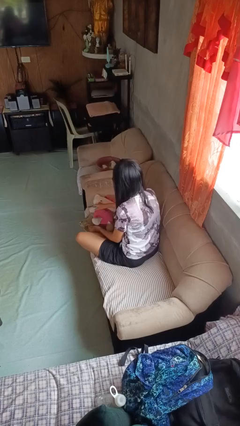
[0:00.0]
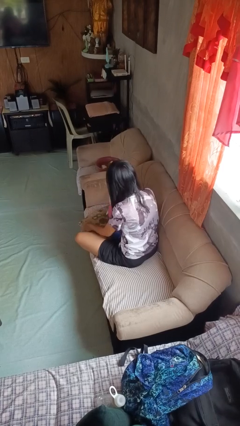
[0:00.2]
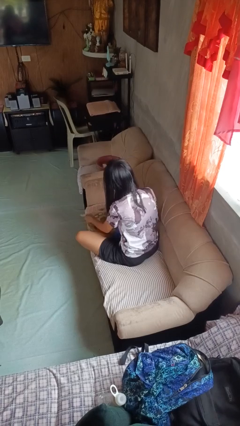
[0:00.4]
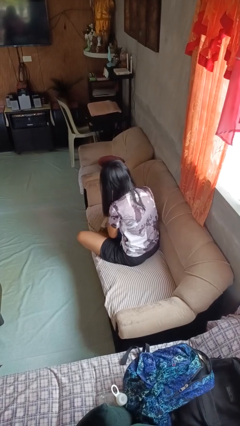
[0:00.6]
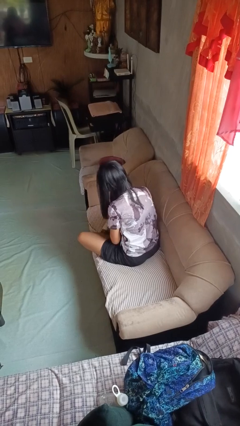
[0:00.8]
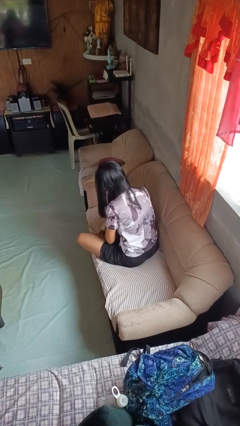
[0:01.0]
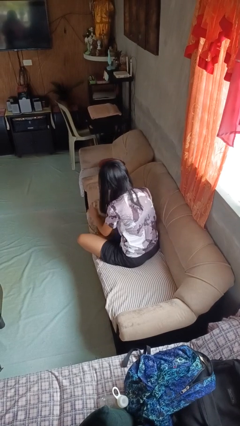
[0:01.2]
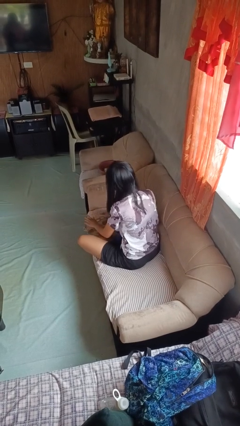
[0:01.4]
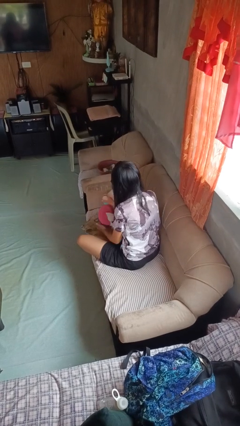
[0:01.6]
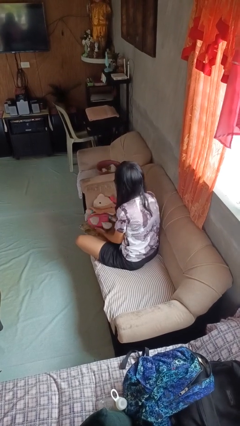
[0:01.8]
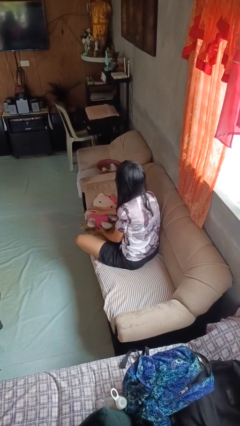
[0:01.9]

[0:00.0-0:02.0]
person searches in couch

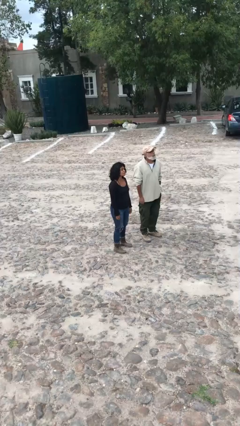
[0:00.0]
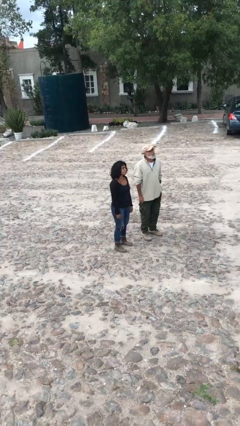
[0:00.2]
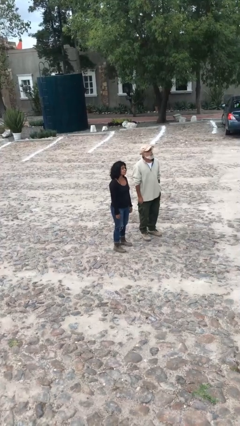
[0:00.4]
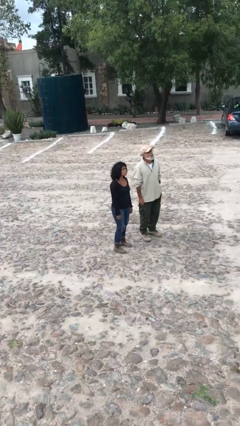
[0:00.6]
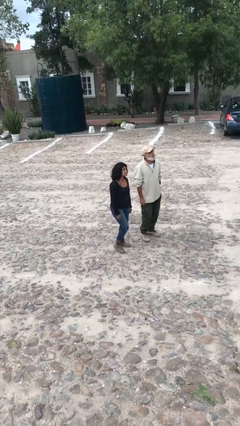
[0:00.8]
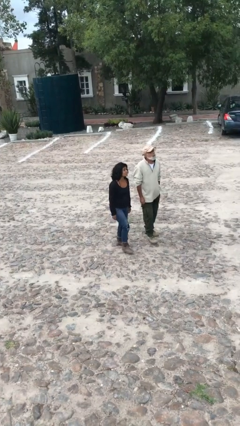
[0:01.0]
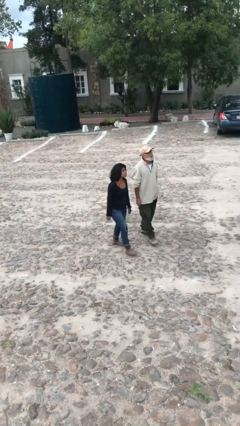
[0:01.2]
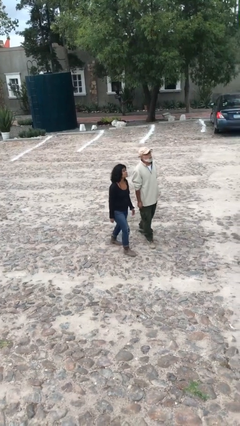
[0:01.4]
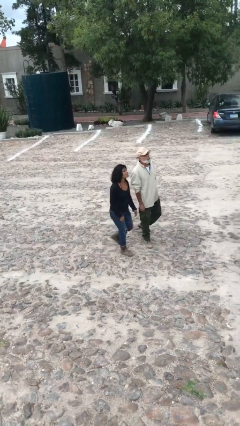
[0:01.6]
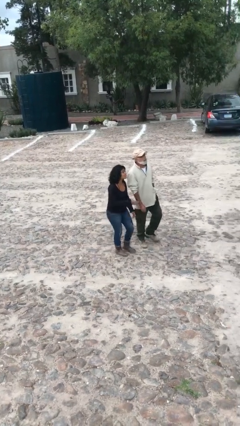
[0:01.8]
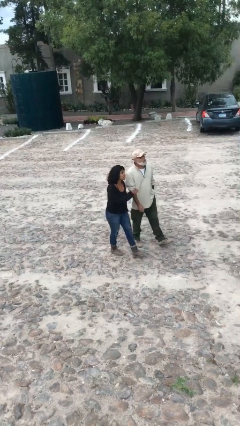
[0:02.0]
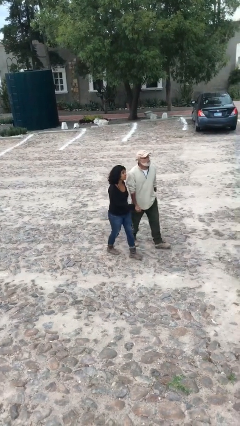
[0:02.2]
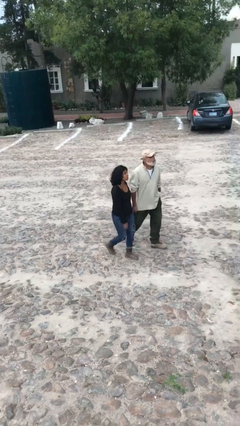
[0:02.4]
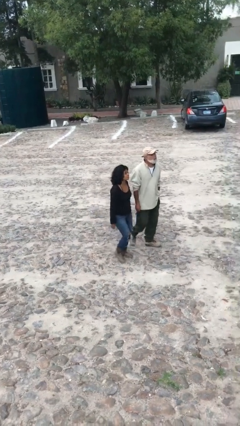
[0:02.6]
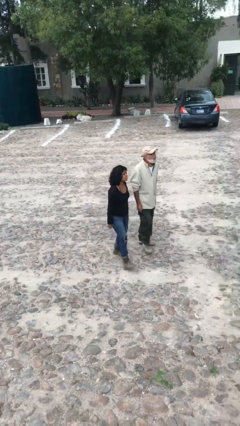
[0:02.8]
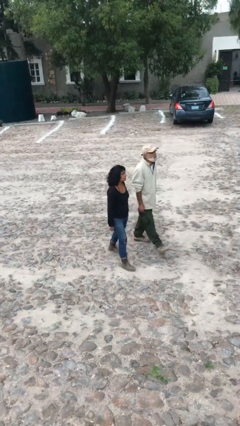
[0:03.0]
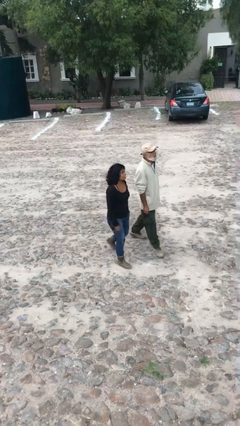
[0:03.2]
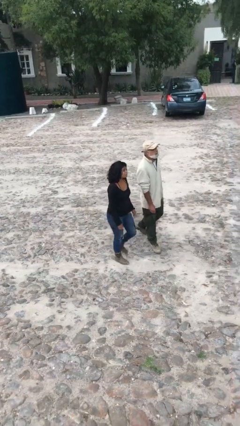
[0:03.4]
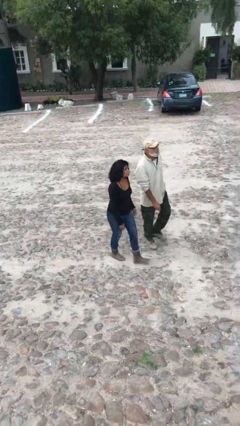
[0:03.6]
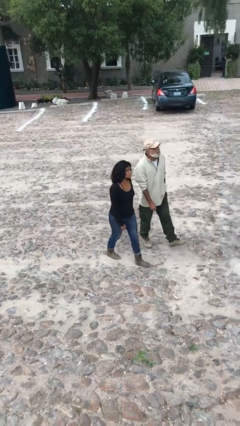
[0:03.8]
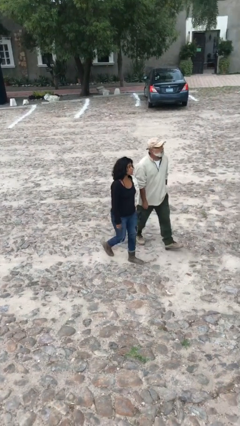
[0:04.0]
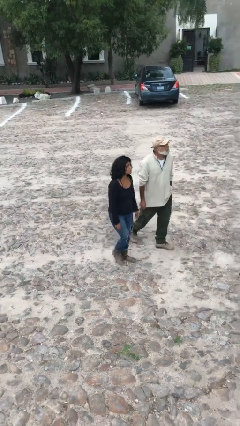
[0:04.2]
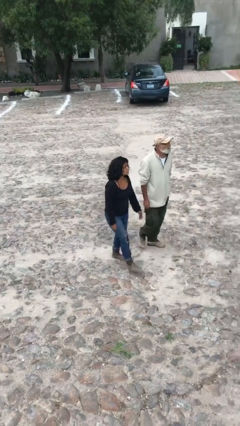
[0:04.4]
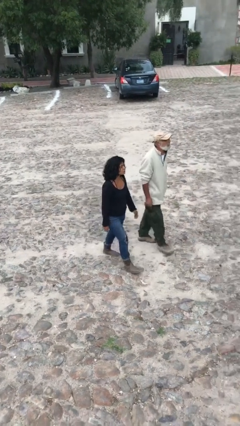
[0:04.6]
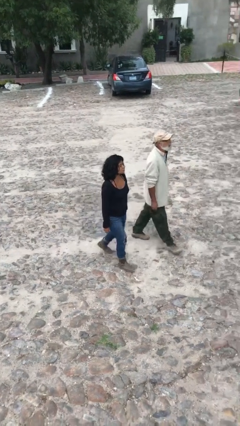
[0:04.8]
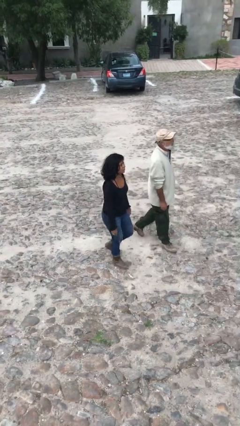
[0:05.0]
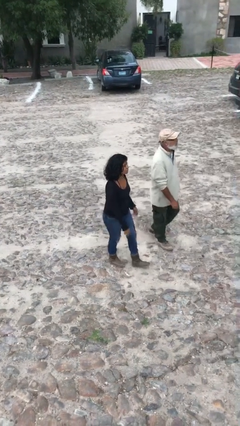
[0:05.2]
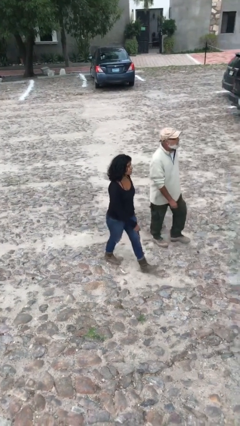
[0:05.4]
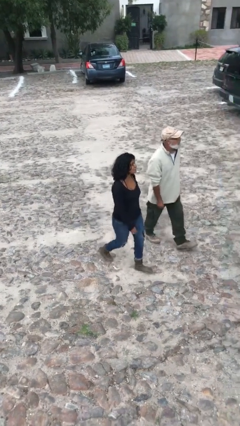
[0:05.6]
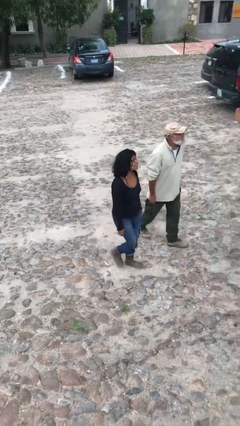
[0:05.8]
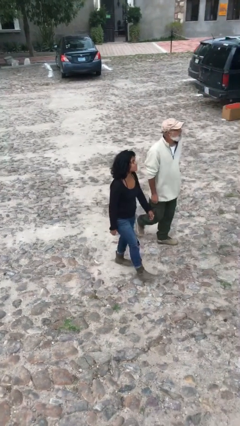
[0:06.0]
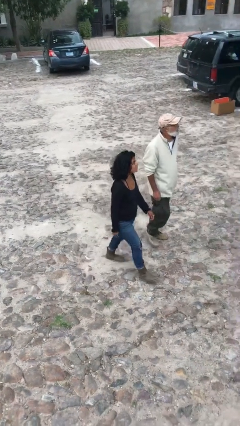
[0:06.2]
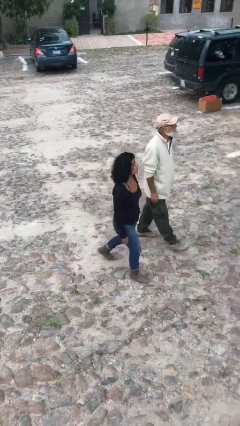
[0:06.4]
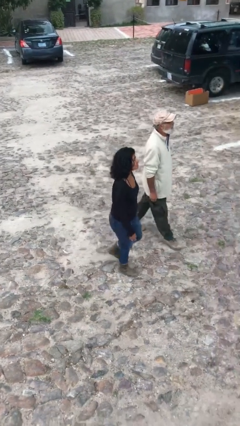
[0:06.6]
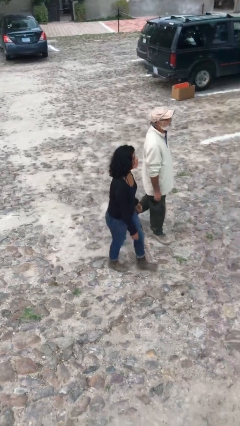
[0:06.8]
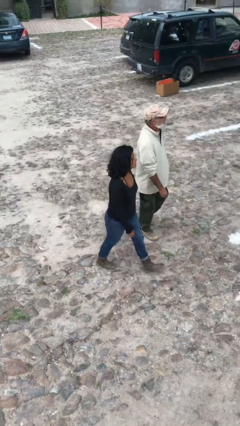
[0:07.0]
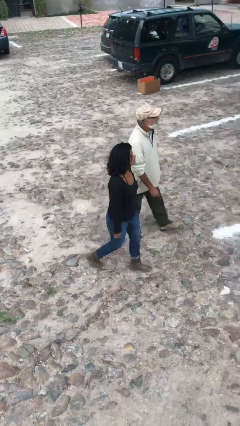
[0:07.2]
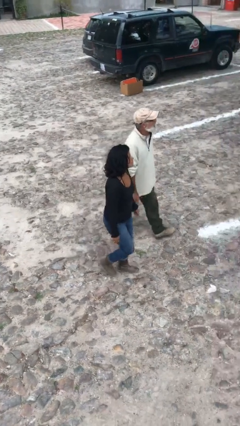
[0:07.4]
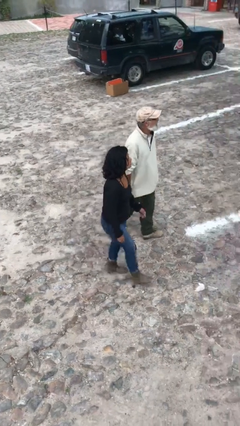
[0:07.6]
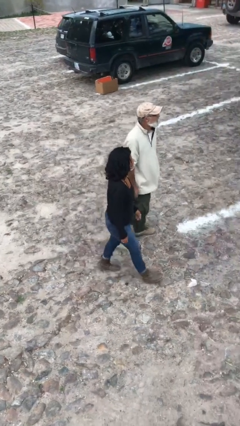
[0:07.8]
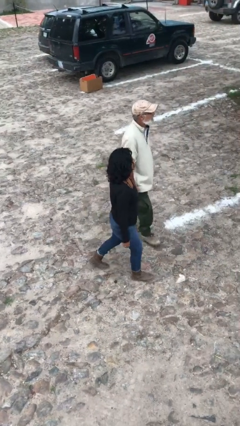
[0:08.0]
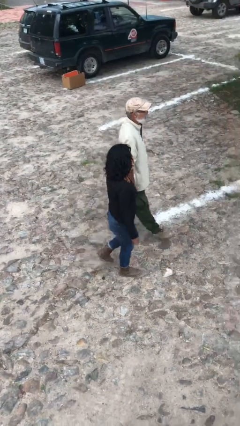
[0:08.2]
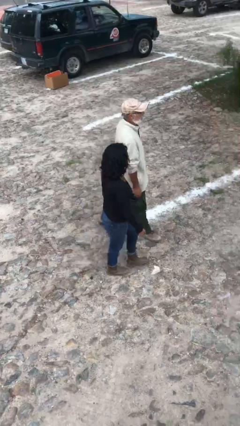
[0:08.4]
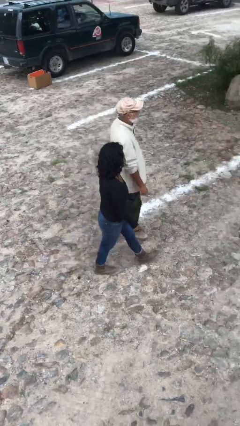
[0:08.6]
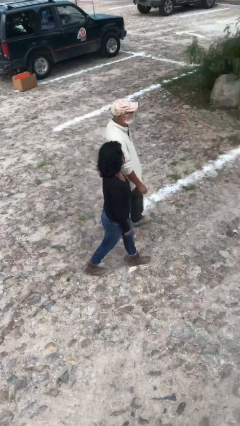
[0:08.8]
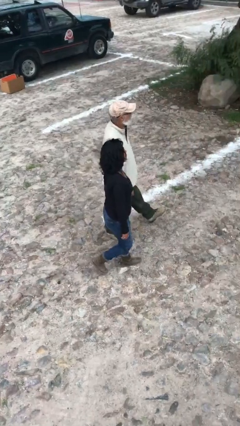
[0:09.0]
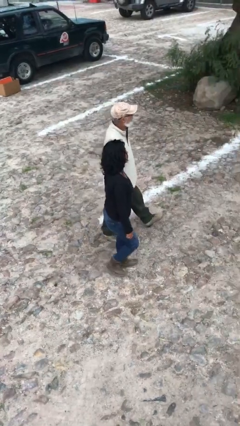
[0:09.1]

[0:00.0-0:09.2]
person talks to person

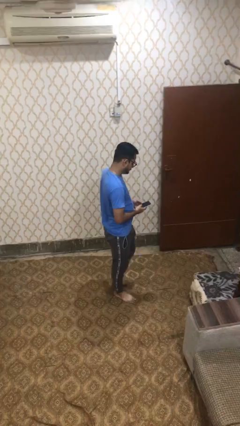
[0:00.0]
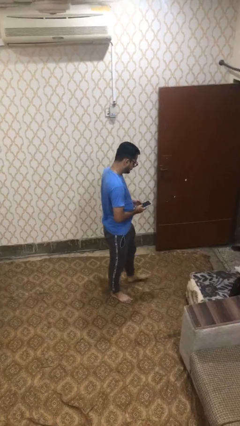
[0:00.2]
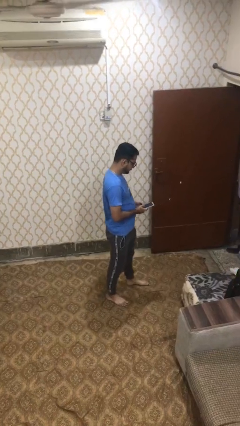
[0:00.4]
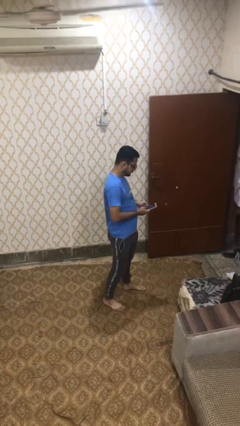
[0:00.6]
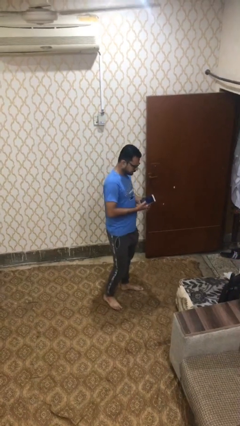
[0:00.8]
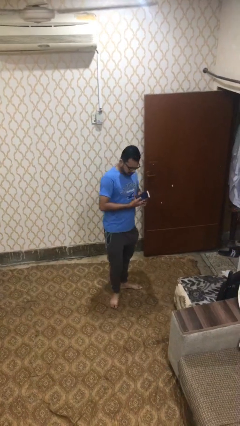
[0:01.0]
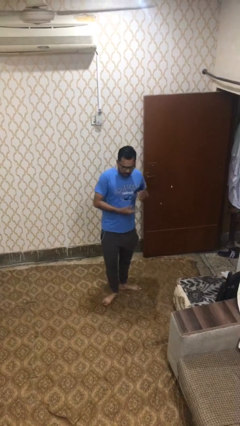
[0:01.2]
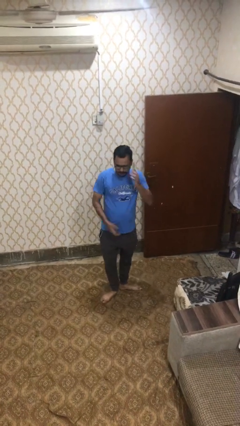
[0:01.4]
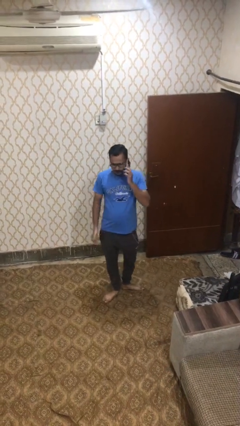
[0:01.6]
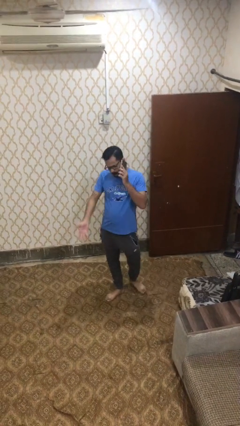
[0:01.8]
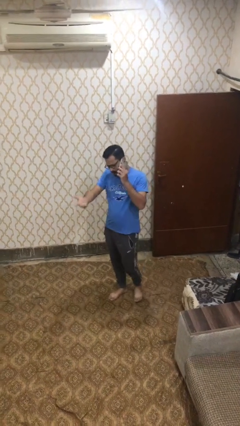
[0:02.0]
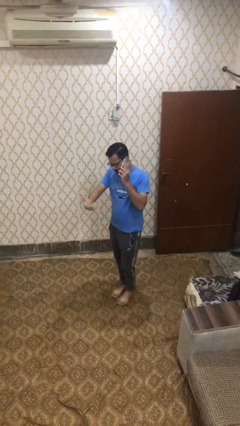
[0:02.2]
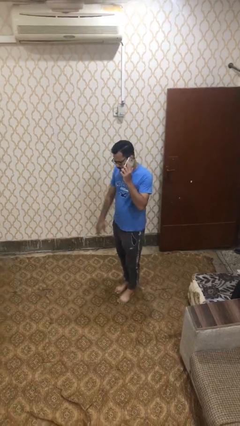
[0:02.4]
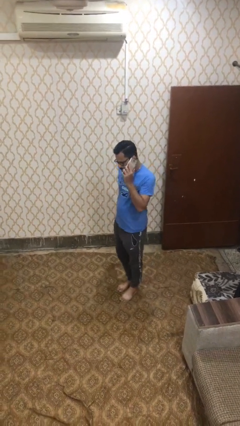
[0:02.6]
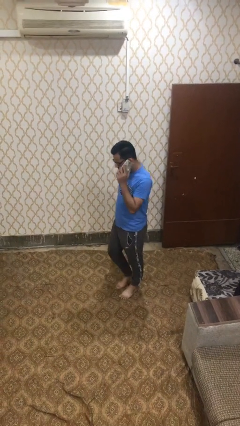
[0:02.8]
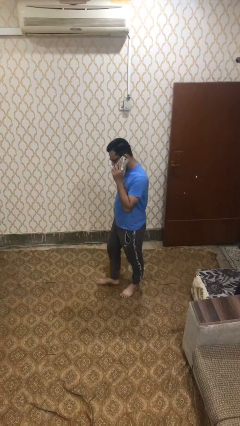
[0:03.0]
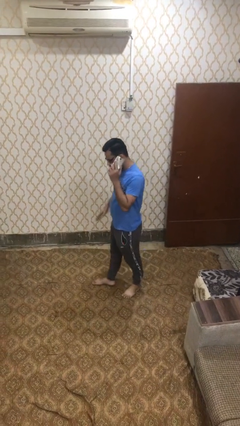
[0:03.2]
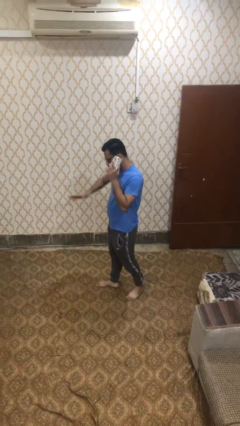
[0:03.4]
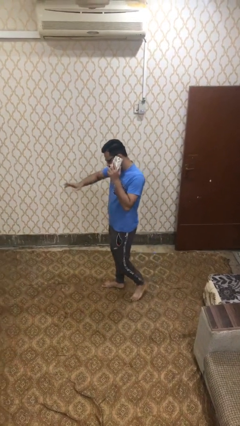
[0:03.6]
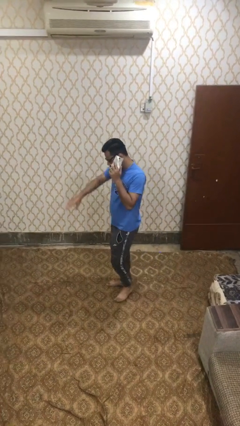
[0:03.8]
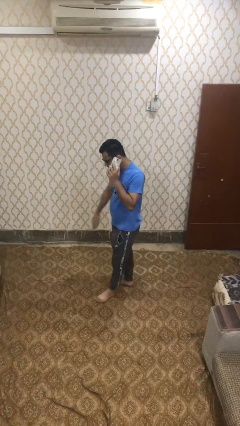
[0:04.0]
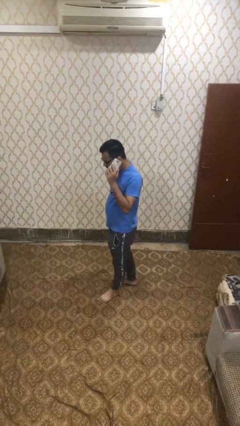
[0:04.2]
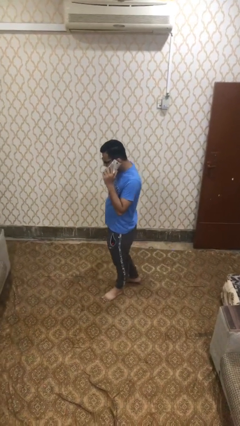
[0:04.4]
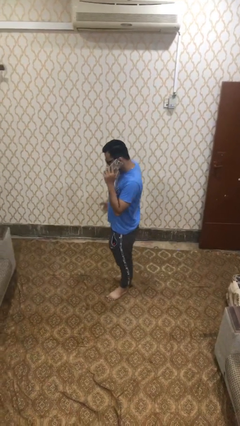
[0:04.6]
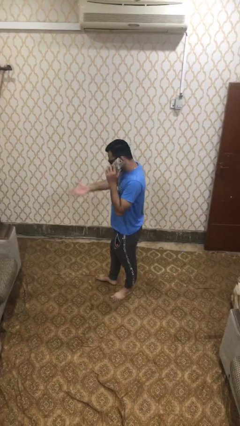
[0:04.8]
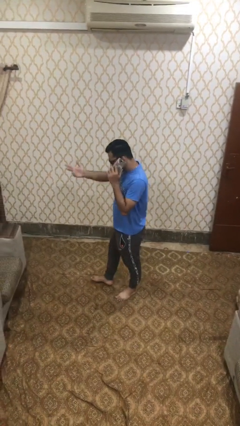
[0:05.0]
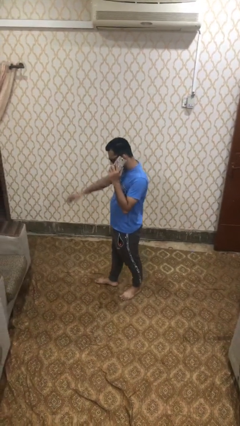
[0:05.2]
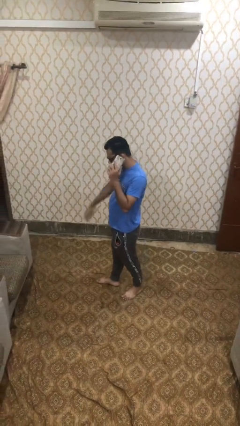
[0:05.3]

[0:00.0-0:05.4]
person talks on phone

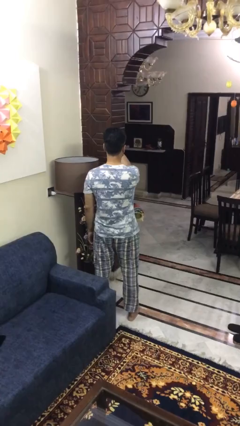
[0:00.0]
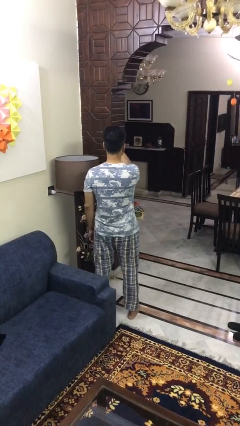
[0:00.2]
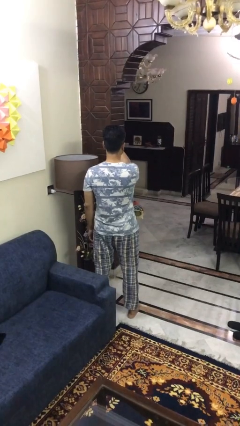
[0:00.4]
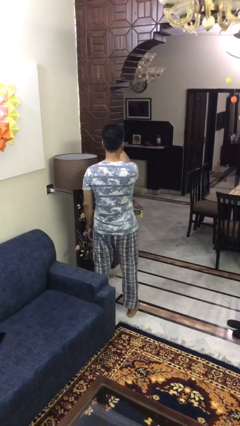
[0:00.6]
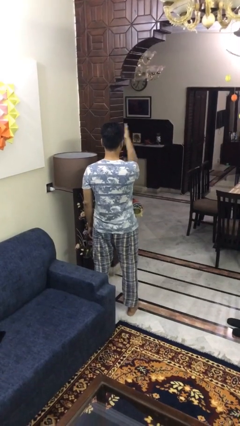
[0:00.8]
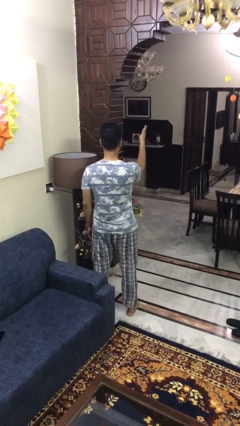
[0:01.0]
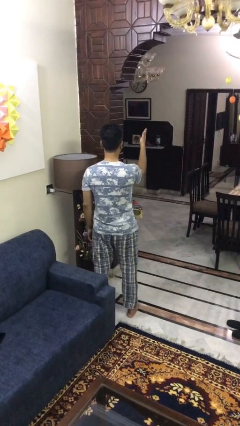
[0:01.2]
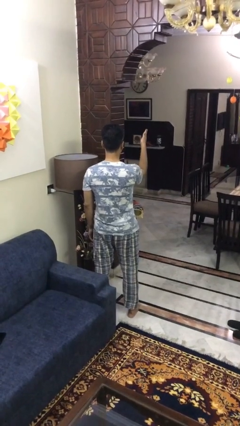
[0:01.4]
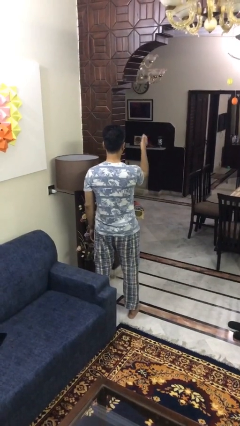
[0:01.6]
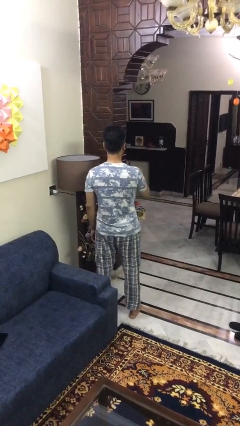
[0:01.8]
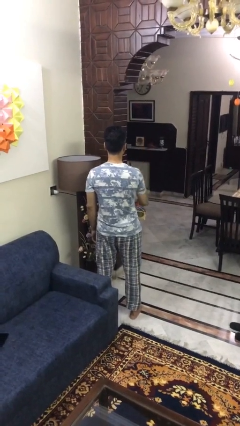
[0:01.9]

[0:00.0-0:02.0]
person gestures swipe right
